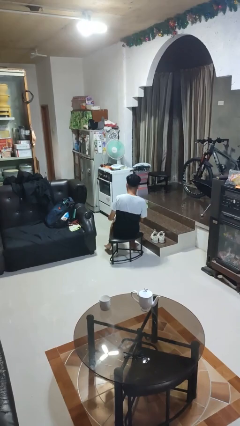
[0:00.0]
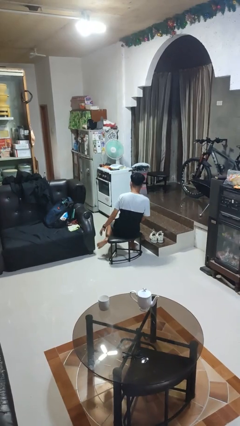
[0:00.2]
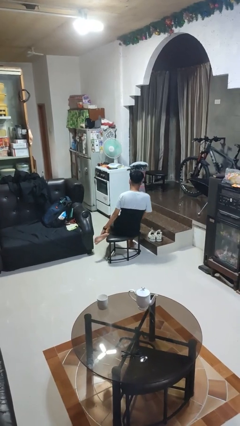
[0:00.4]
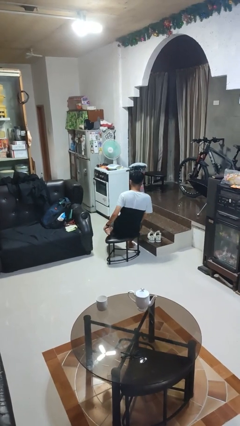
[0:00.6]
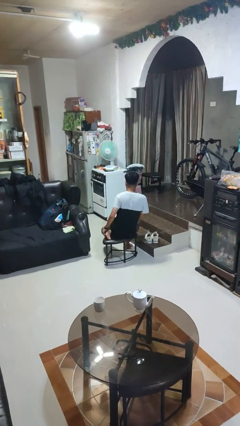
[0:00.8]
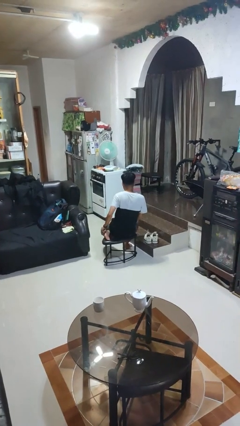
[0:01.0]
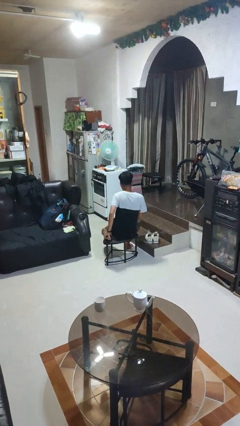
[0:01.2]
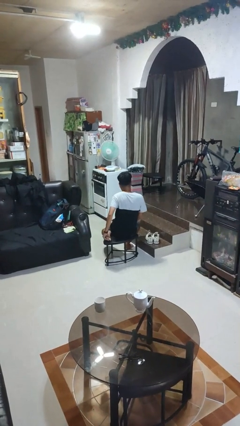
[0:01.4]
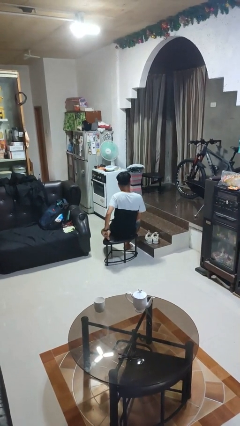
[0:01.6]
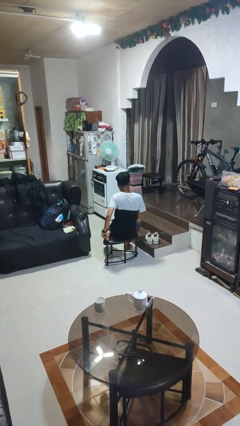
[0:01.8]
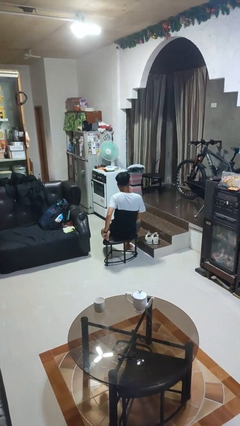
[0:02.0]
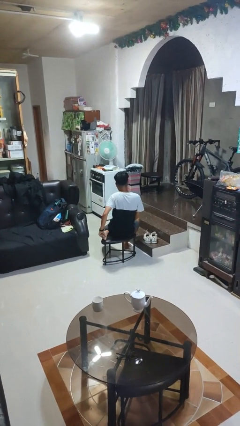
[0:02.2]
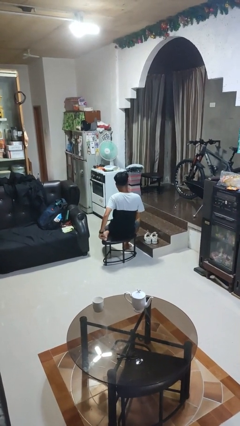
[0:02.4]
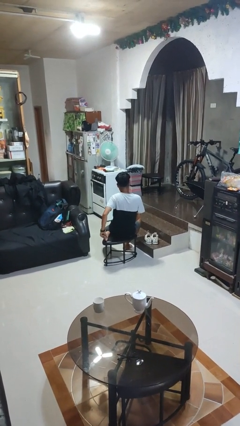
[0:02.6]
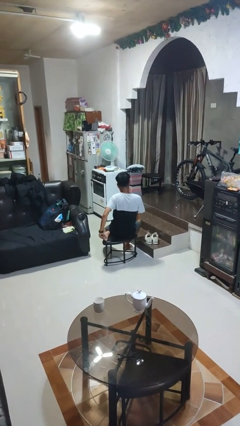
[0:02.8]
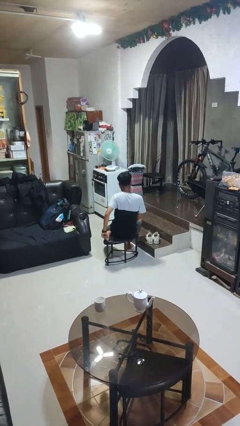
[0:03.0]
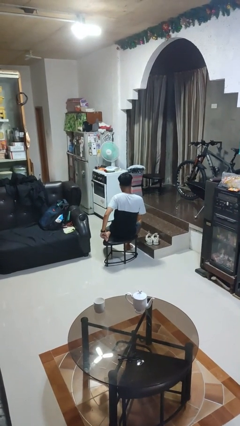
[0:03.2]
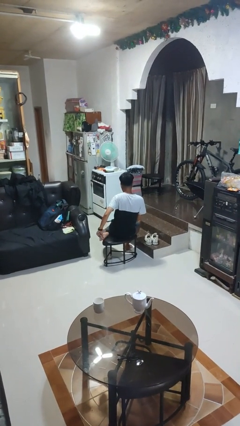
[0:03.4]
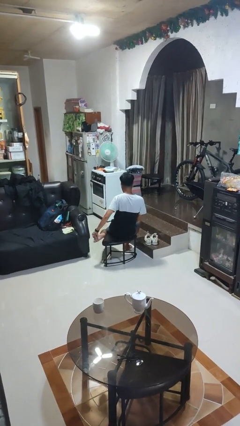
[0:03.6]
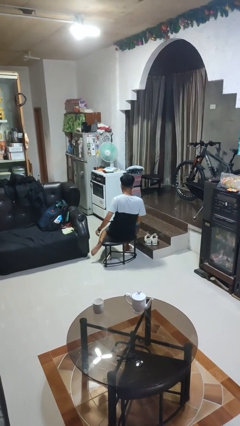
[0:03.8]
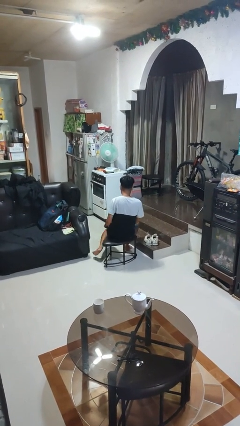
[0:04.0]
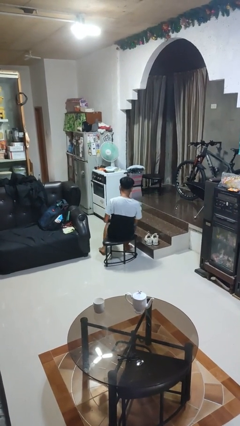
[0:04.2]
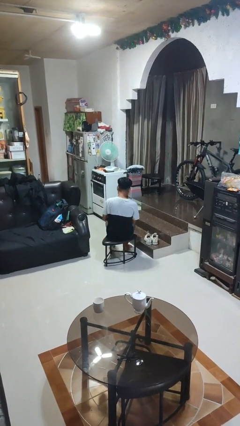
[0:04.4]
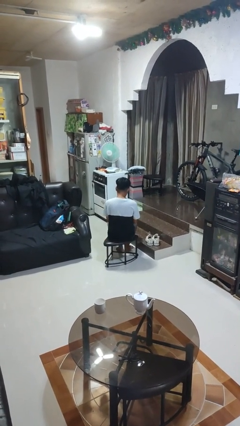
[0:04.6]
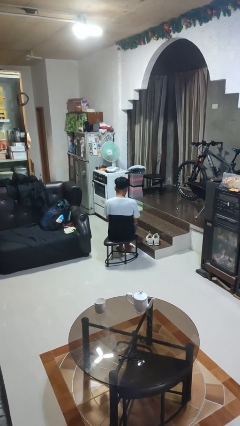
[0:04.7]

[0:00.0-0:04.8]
person rubs foot

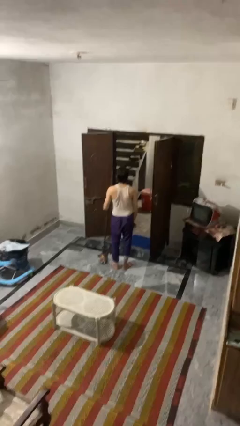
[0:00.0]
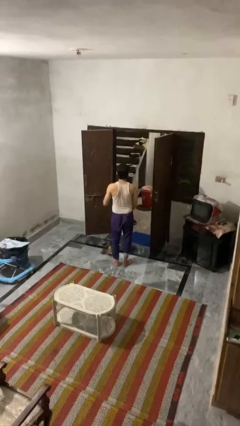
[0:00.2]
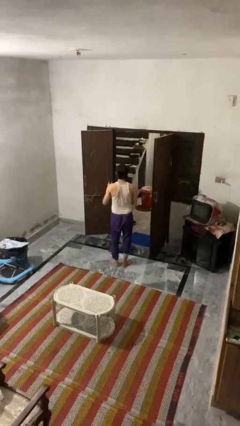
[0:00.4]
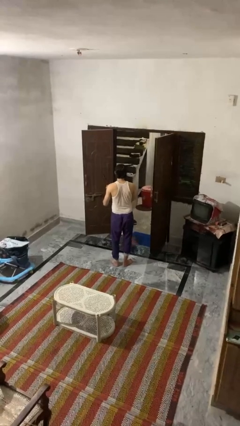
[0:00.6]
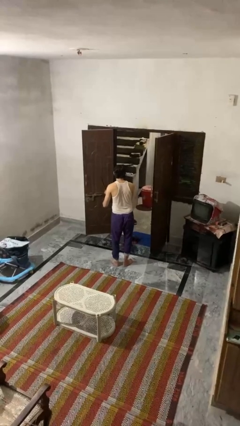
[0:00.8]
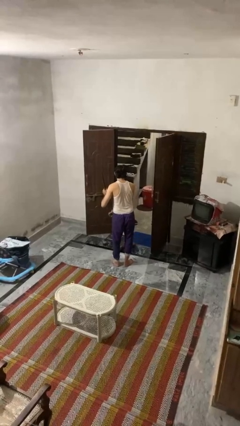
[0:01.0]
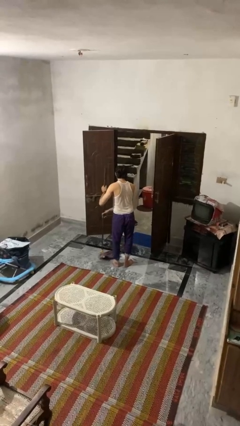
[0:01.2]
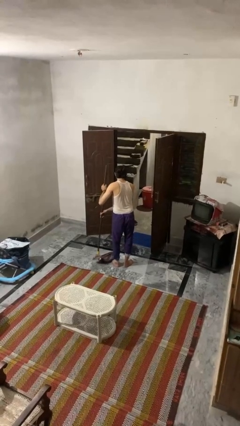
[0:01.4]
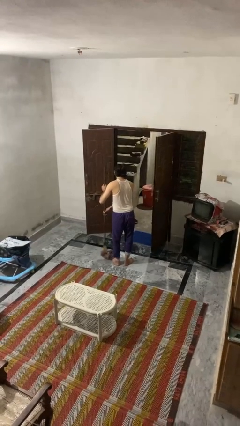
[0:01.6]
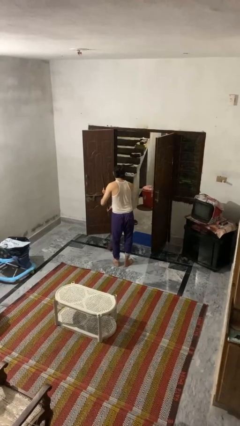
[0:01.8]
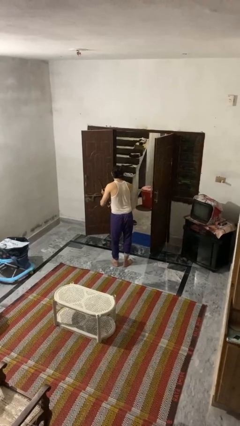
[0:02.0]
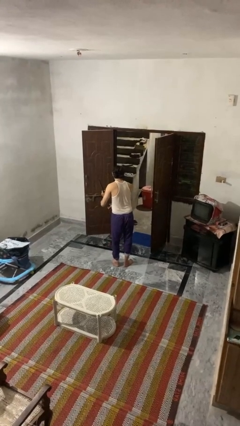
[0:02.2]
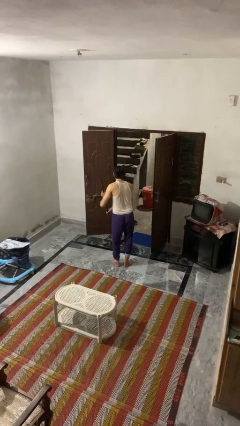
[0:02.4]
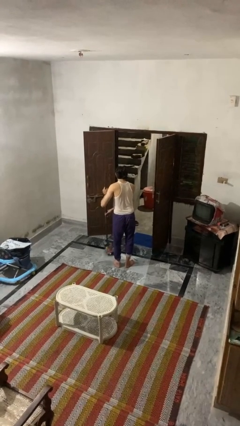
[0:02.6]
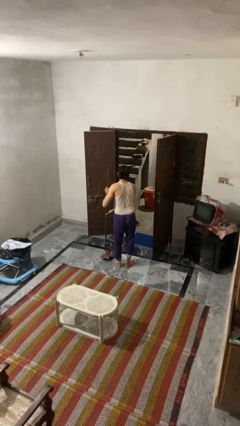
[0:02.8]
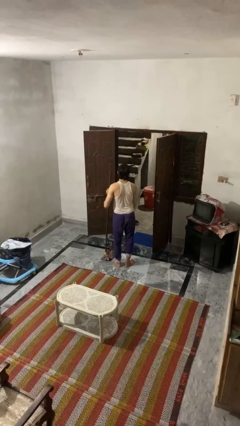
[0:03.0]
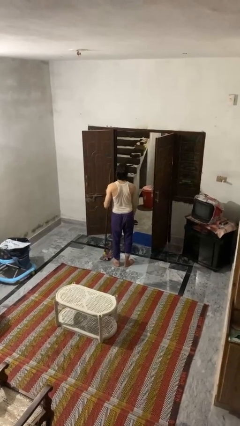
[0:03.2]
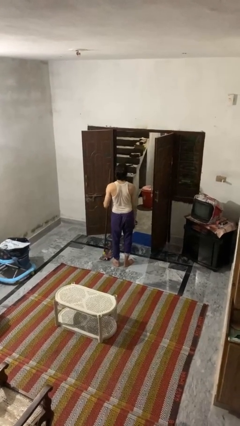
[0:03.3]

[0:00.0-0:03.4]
person mops

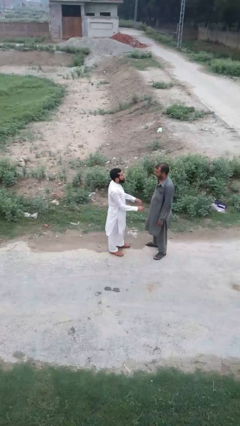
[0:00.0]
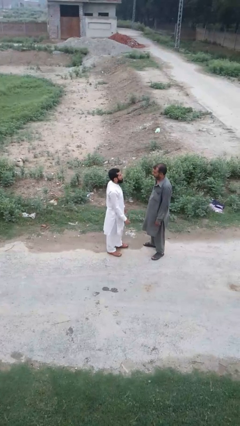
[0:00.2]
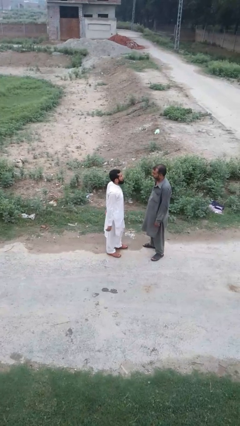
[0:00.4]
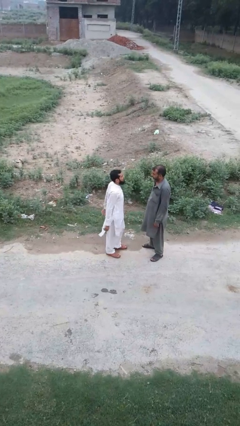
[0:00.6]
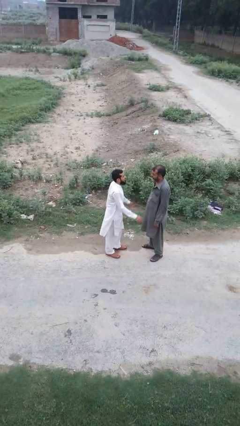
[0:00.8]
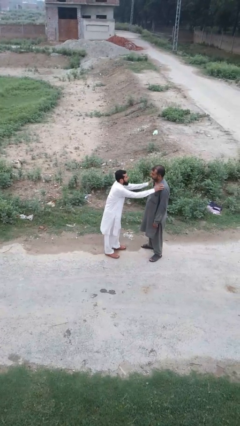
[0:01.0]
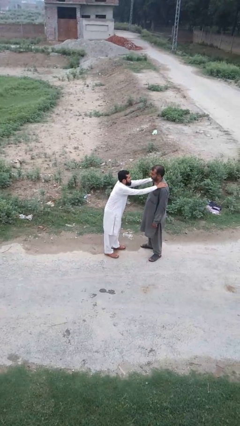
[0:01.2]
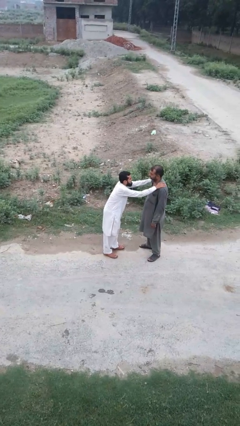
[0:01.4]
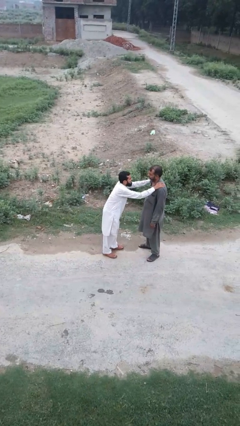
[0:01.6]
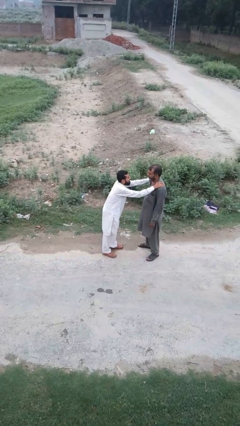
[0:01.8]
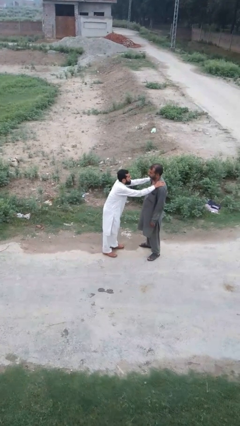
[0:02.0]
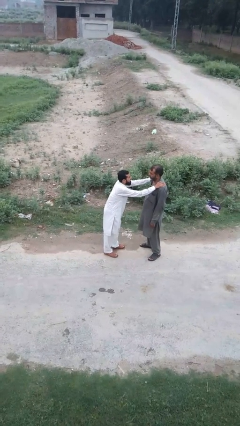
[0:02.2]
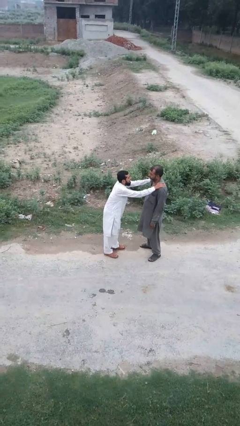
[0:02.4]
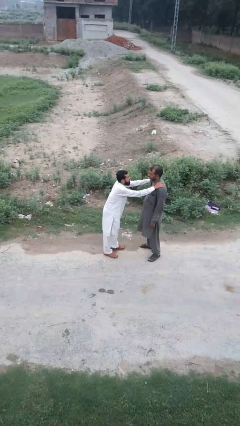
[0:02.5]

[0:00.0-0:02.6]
person pounds shoulders of person

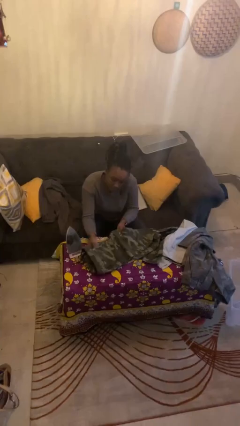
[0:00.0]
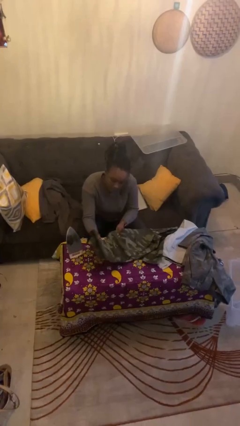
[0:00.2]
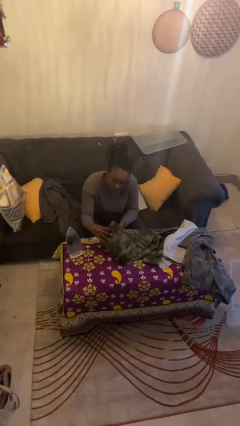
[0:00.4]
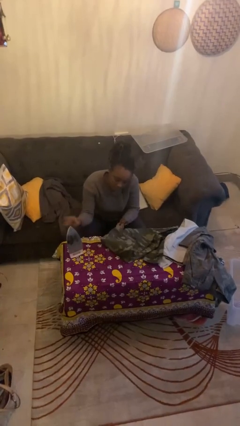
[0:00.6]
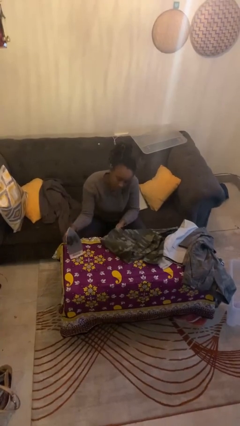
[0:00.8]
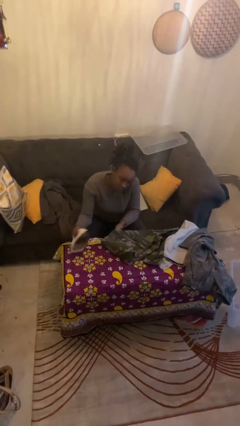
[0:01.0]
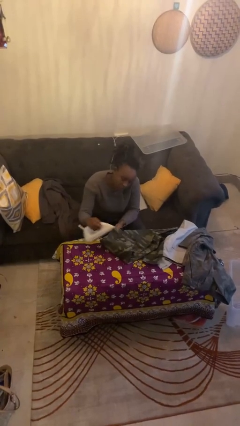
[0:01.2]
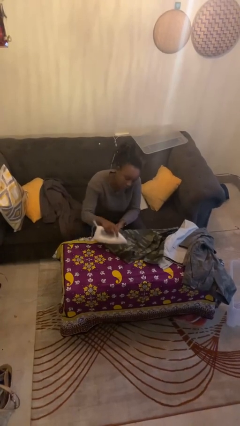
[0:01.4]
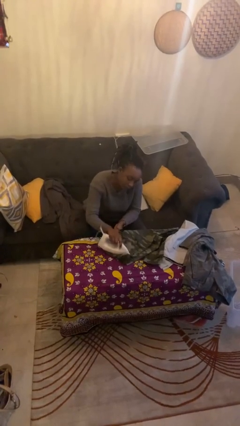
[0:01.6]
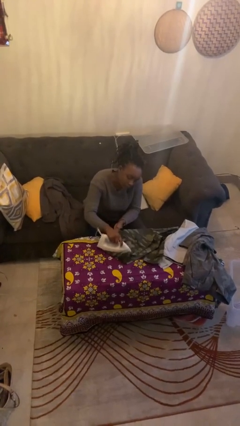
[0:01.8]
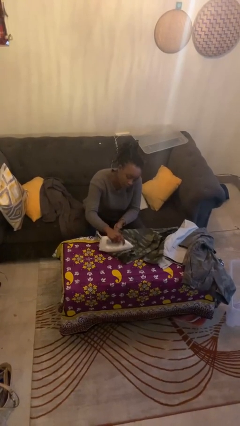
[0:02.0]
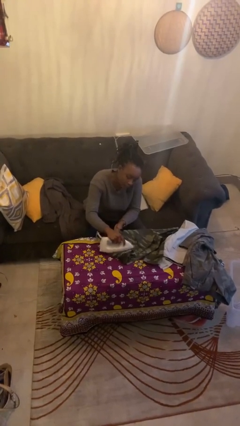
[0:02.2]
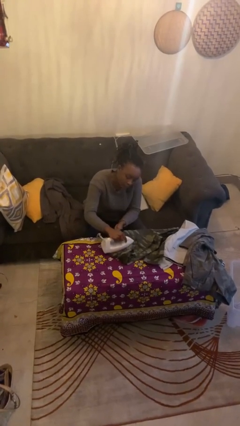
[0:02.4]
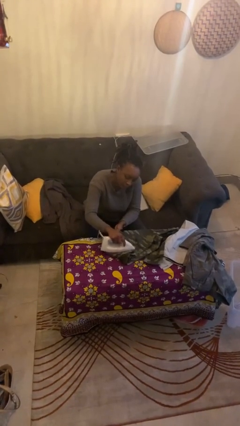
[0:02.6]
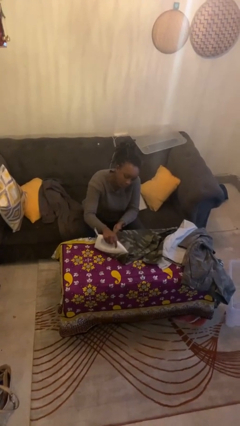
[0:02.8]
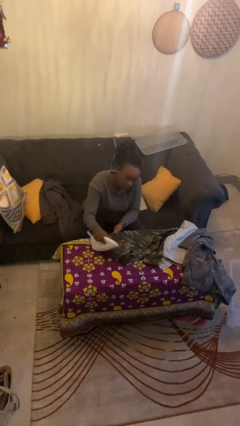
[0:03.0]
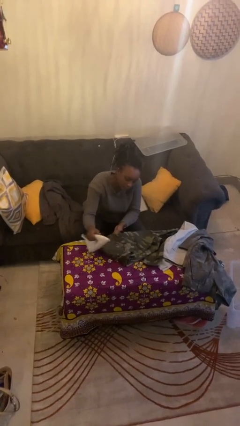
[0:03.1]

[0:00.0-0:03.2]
person irons clothes

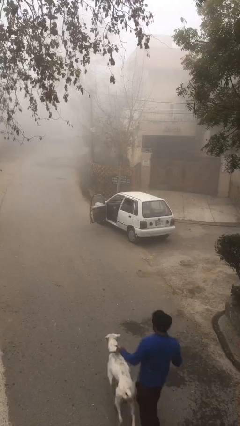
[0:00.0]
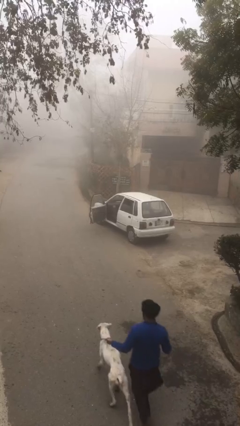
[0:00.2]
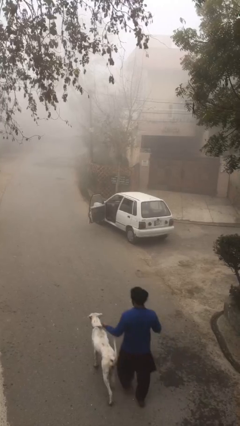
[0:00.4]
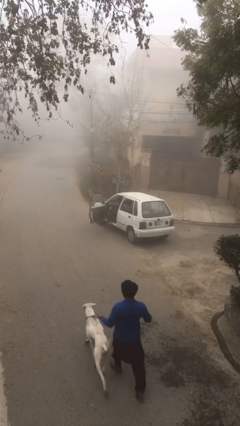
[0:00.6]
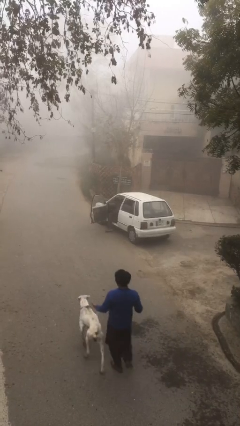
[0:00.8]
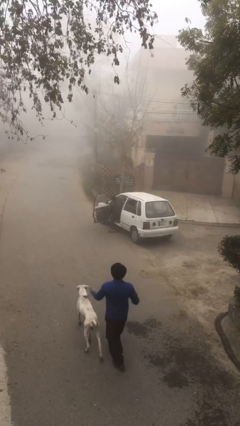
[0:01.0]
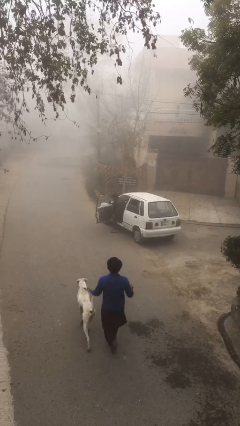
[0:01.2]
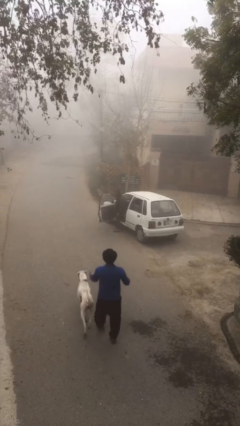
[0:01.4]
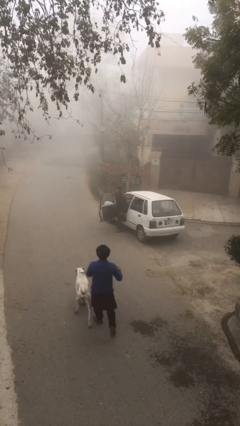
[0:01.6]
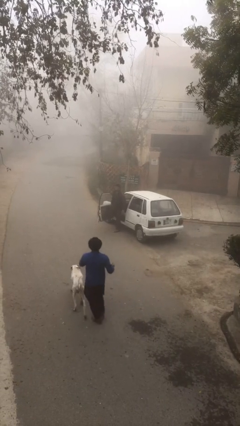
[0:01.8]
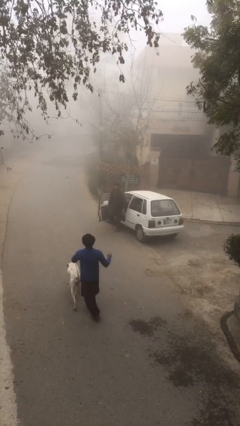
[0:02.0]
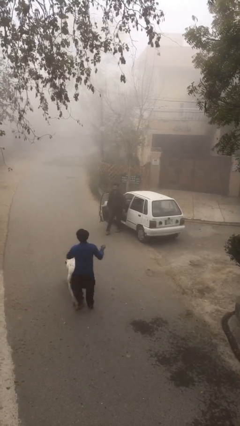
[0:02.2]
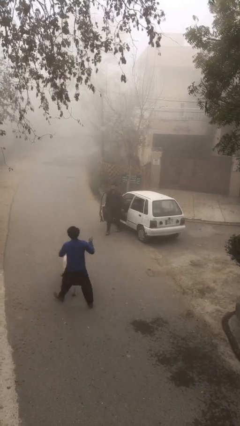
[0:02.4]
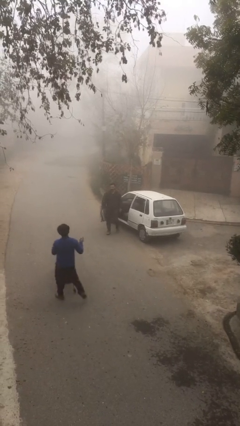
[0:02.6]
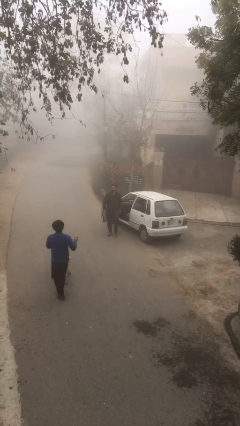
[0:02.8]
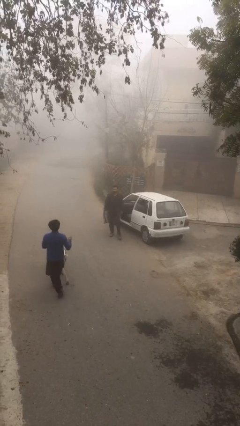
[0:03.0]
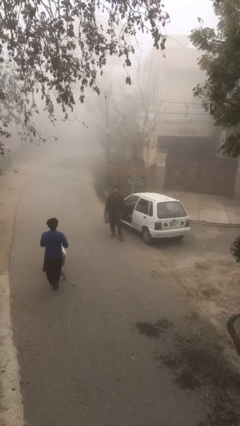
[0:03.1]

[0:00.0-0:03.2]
person exits car
